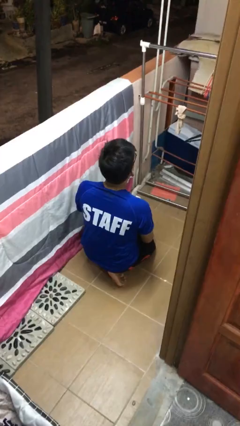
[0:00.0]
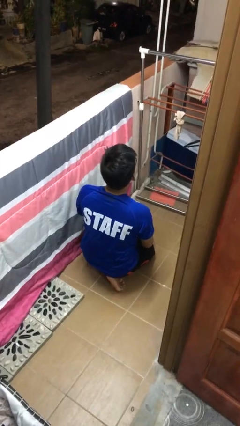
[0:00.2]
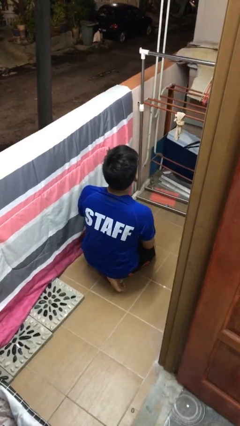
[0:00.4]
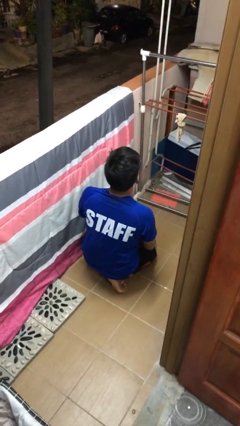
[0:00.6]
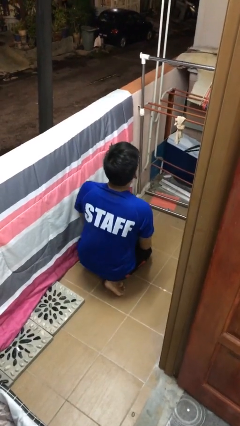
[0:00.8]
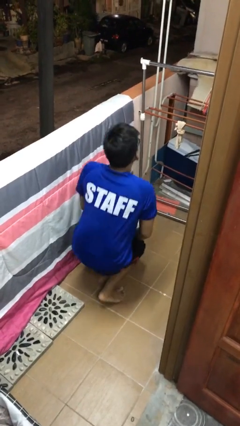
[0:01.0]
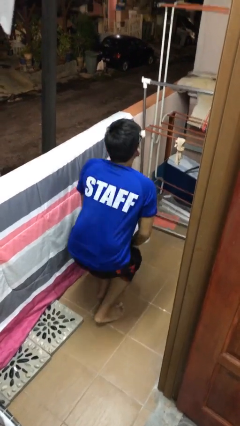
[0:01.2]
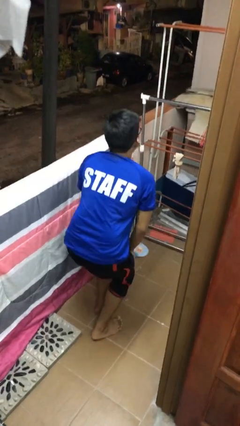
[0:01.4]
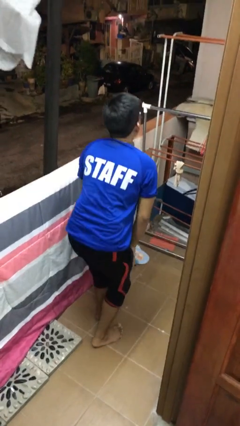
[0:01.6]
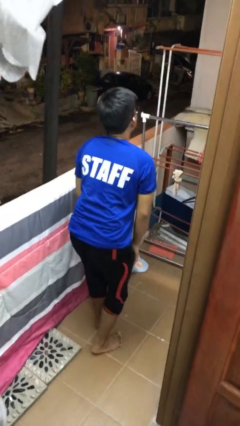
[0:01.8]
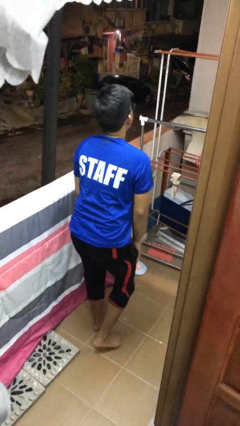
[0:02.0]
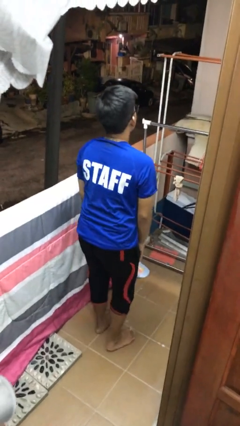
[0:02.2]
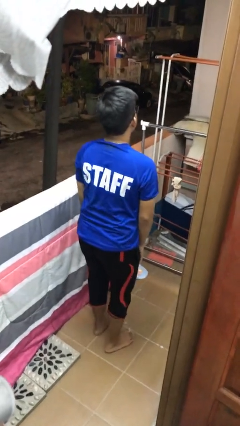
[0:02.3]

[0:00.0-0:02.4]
person stands up from floor

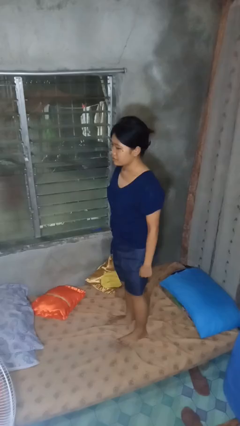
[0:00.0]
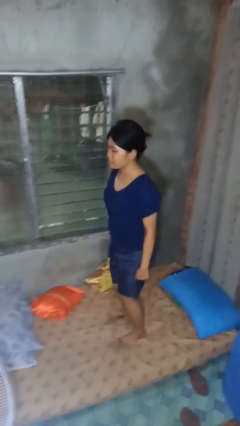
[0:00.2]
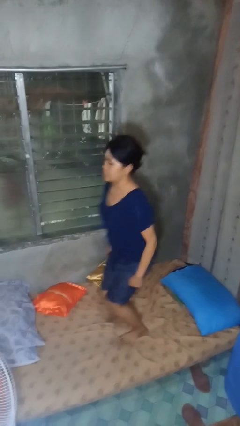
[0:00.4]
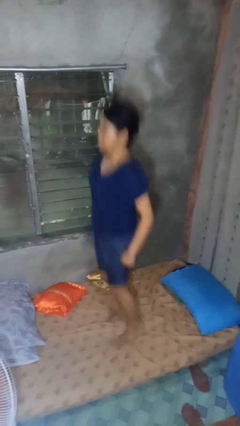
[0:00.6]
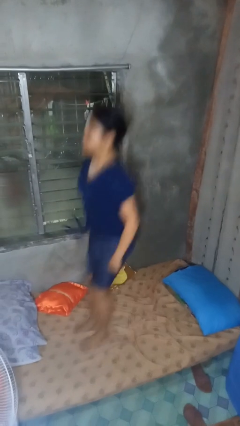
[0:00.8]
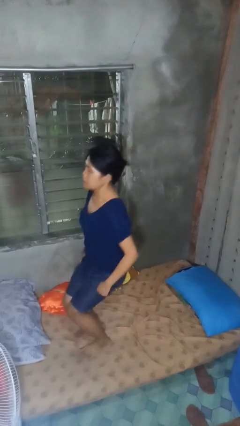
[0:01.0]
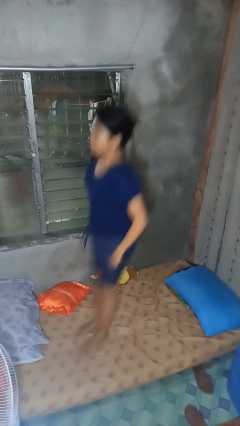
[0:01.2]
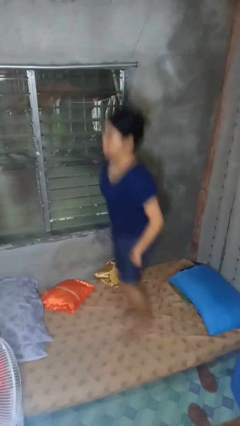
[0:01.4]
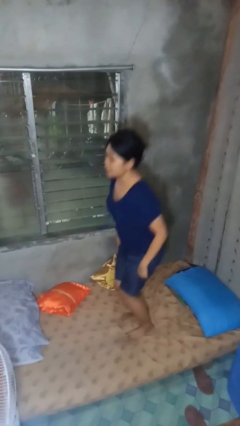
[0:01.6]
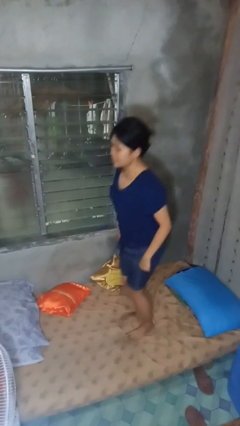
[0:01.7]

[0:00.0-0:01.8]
person jumps on bed

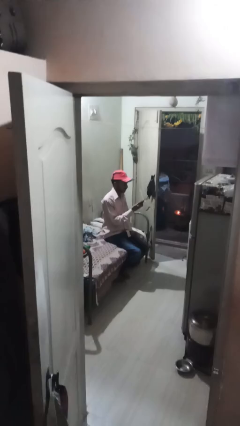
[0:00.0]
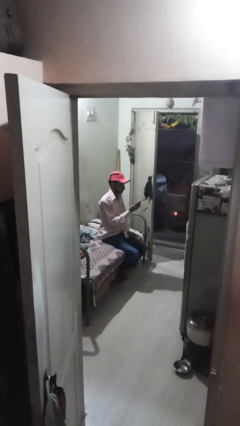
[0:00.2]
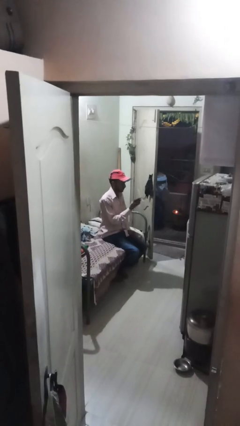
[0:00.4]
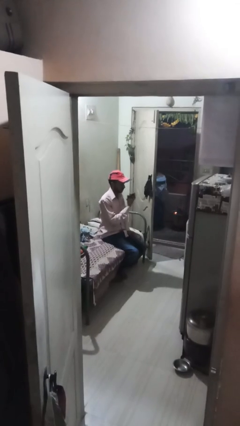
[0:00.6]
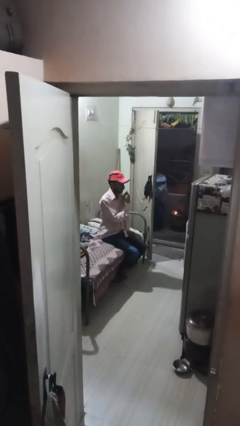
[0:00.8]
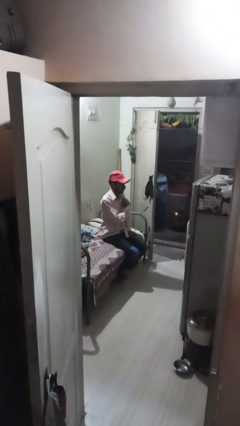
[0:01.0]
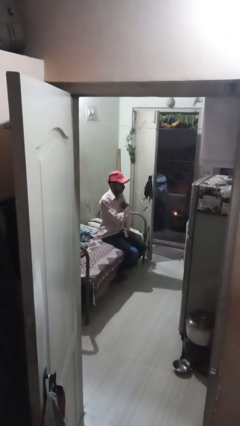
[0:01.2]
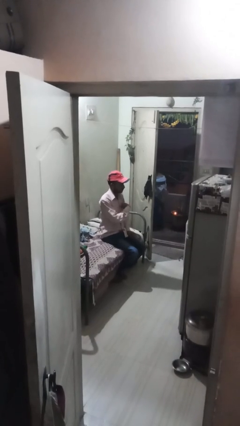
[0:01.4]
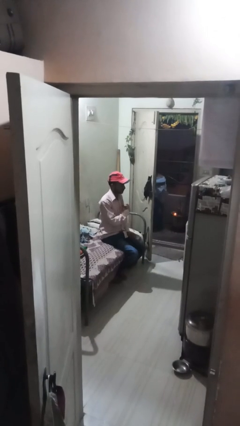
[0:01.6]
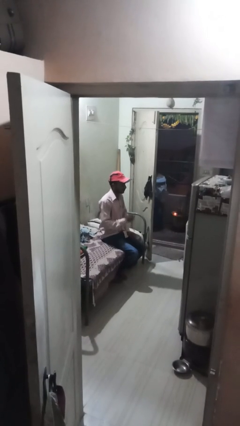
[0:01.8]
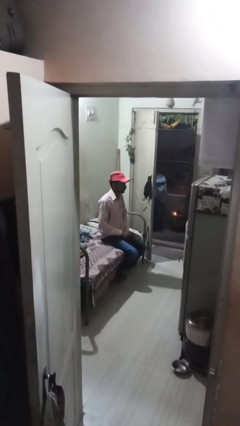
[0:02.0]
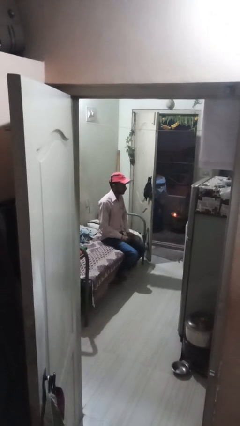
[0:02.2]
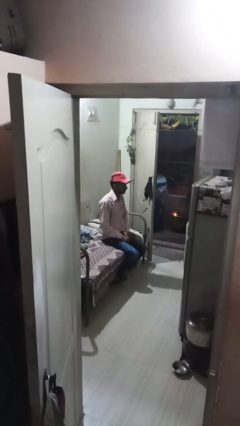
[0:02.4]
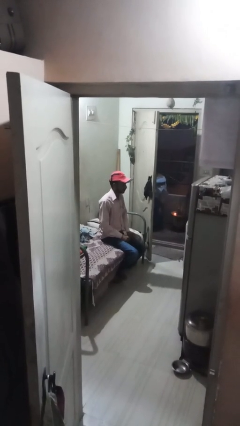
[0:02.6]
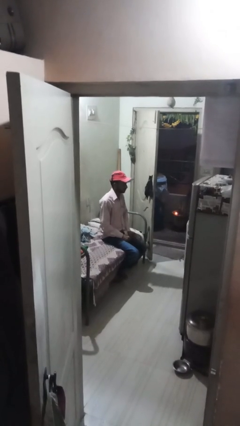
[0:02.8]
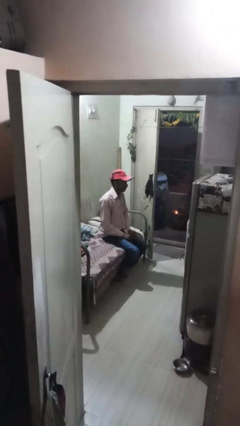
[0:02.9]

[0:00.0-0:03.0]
person puts phone into pocket

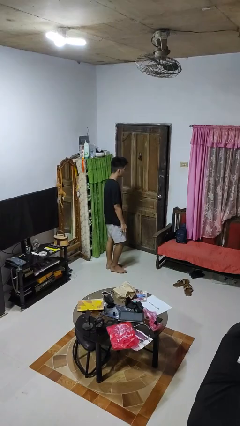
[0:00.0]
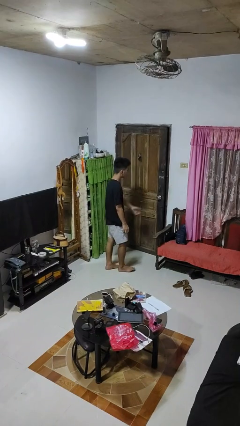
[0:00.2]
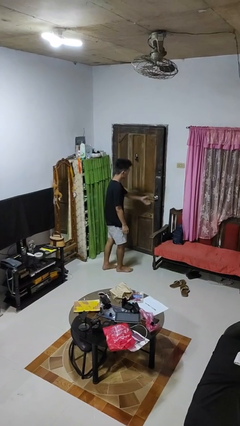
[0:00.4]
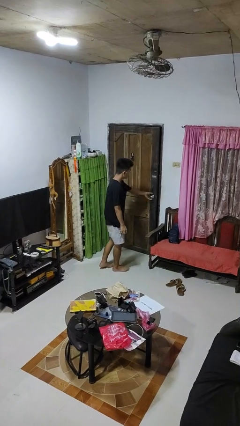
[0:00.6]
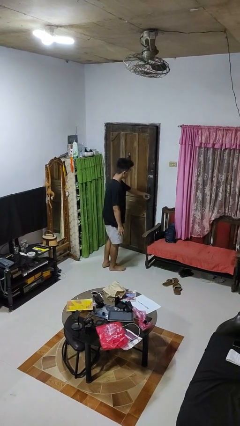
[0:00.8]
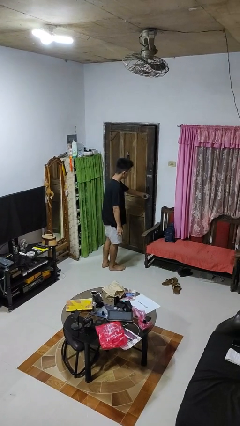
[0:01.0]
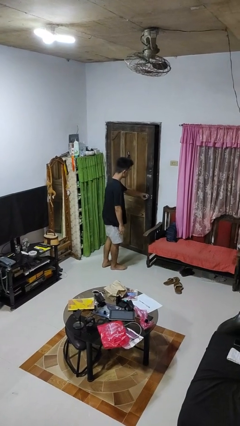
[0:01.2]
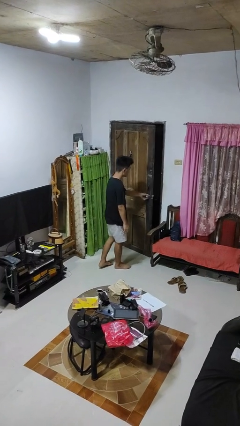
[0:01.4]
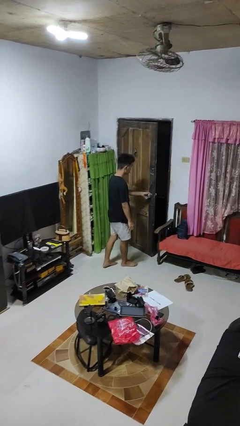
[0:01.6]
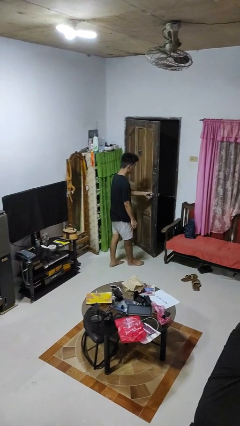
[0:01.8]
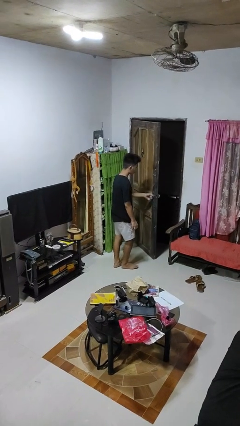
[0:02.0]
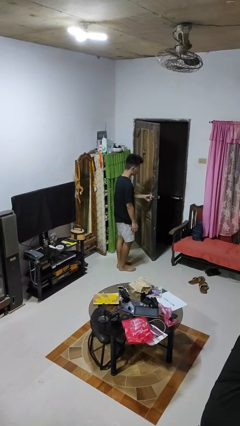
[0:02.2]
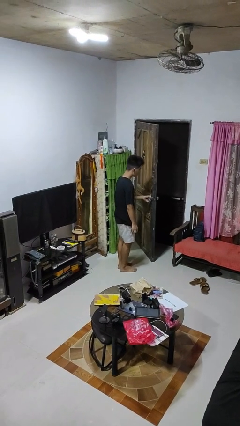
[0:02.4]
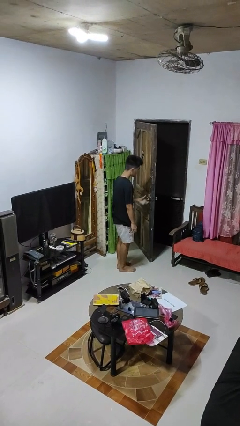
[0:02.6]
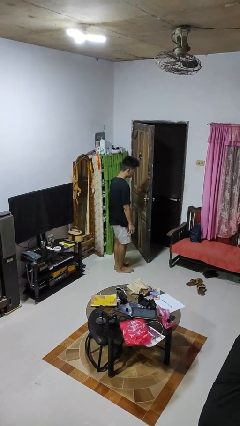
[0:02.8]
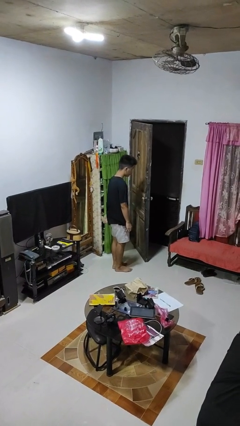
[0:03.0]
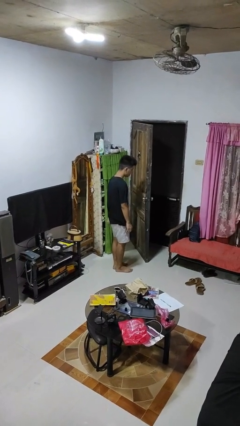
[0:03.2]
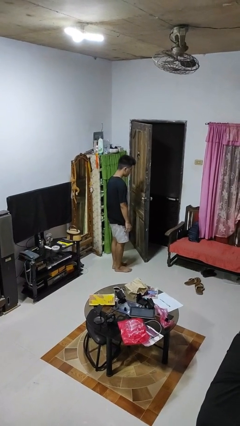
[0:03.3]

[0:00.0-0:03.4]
person opens facility door

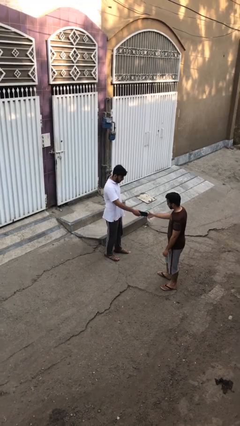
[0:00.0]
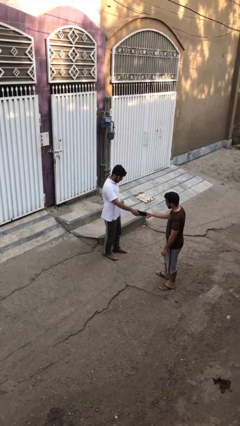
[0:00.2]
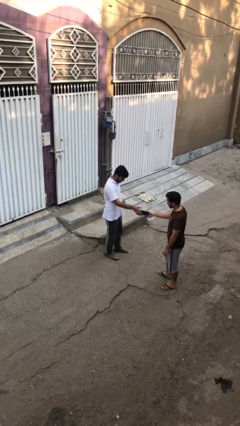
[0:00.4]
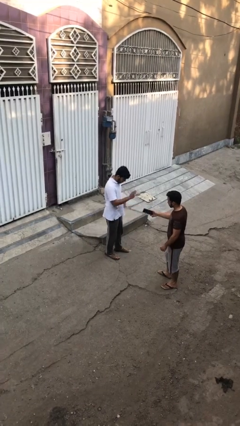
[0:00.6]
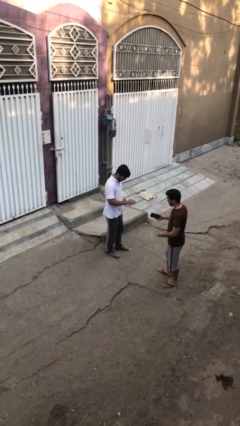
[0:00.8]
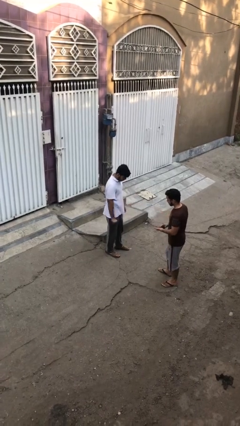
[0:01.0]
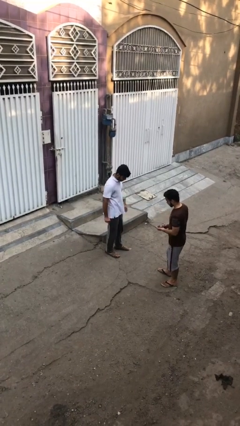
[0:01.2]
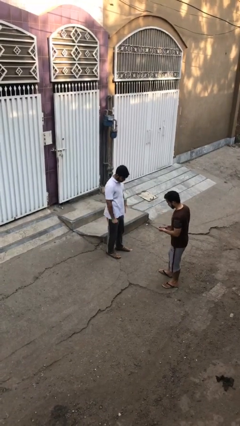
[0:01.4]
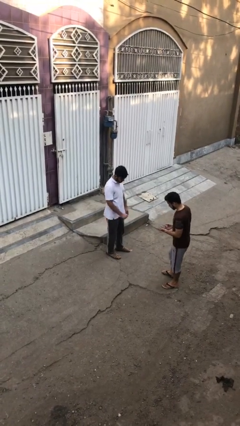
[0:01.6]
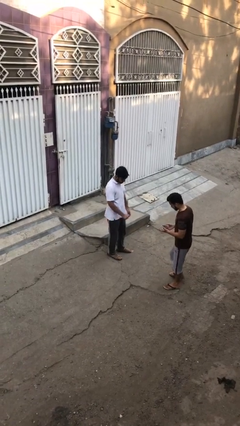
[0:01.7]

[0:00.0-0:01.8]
person transfers object to person

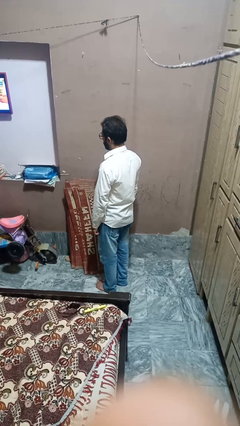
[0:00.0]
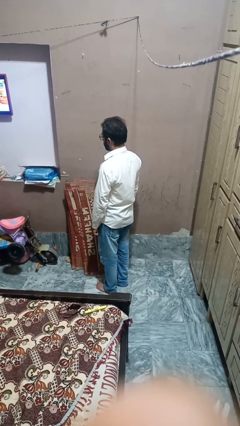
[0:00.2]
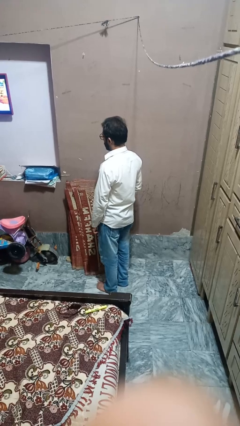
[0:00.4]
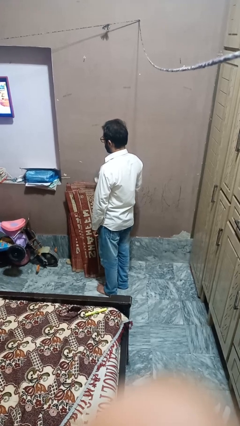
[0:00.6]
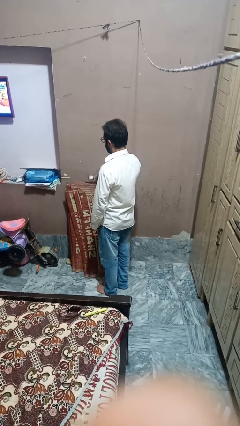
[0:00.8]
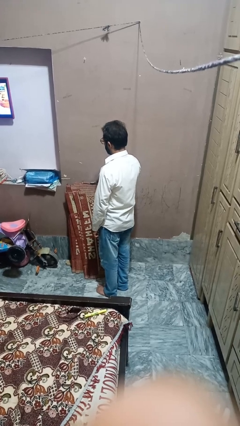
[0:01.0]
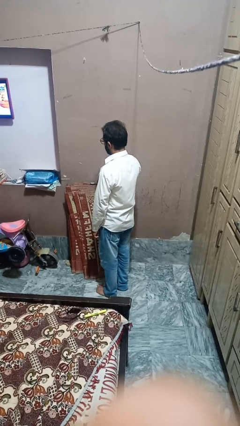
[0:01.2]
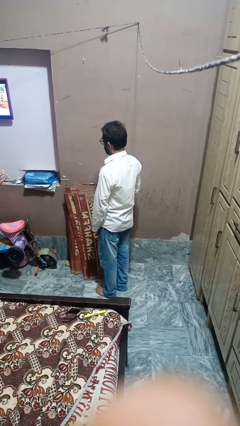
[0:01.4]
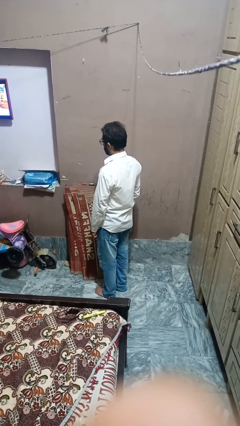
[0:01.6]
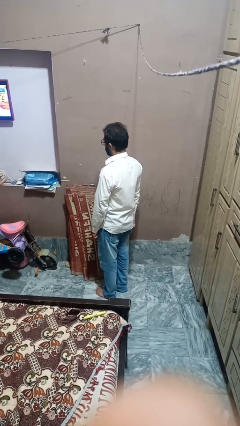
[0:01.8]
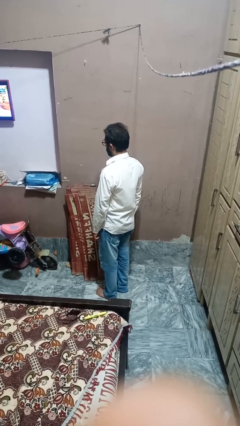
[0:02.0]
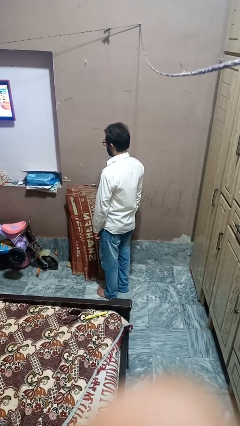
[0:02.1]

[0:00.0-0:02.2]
person takes off wristwatch

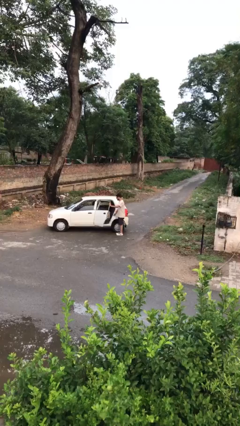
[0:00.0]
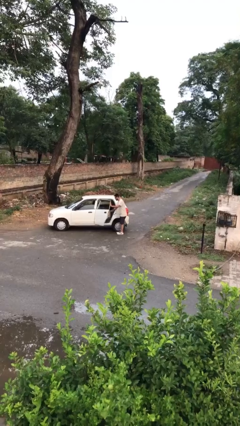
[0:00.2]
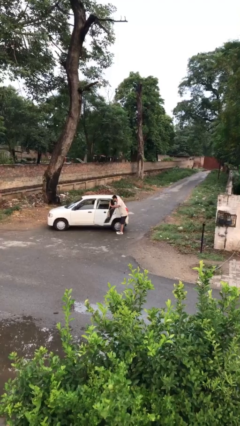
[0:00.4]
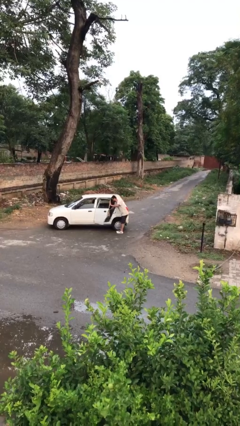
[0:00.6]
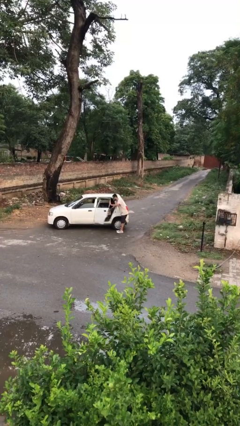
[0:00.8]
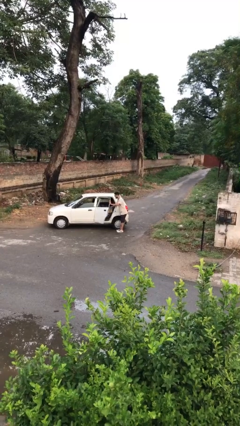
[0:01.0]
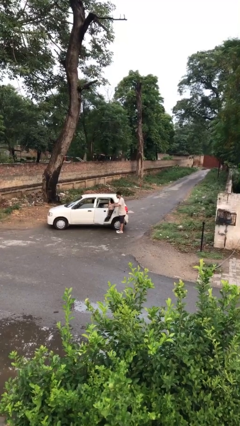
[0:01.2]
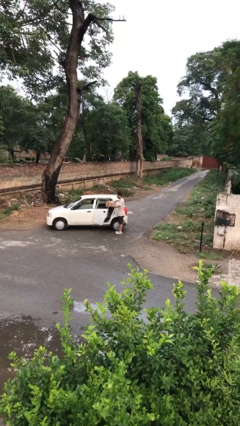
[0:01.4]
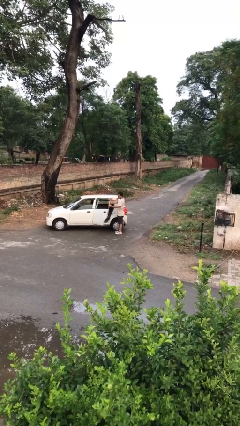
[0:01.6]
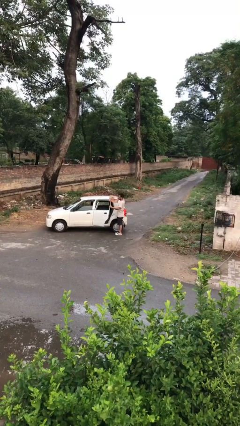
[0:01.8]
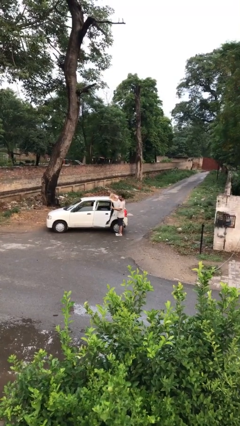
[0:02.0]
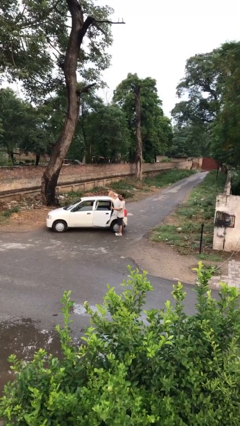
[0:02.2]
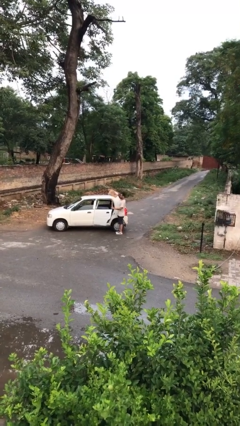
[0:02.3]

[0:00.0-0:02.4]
person unloads car
